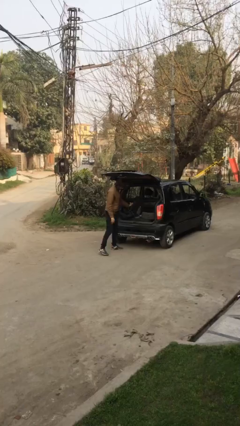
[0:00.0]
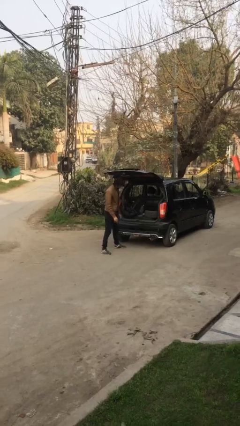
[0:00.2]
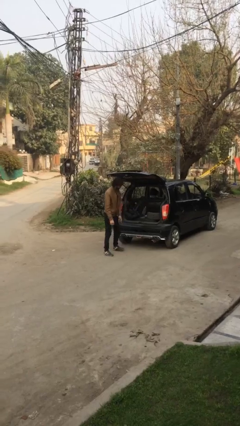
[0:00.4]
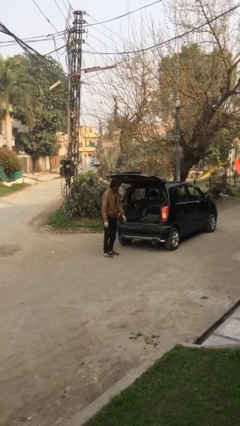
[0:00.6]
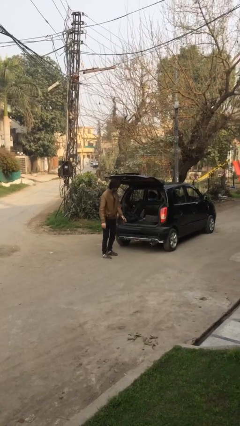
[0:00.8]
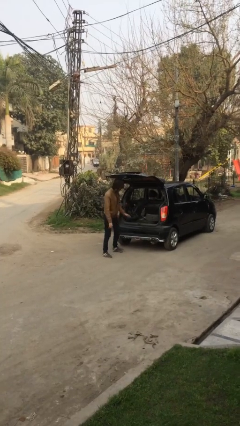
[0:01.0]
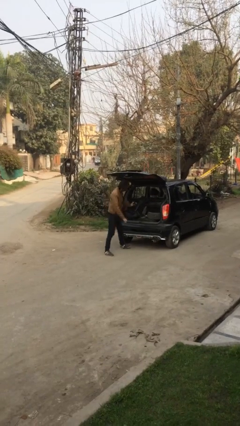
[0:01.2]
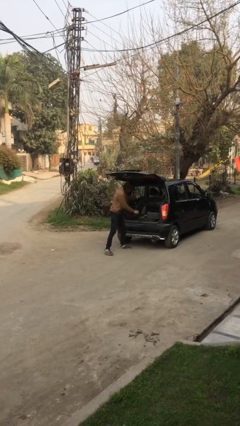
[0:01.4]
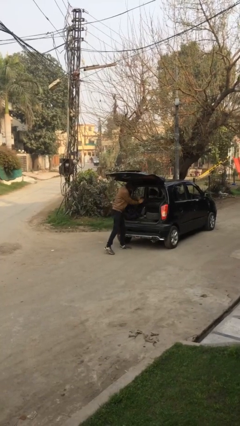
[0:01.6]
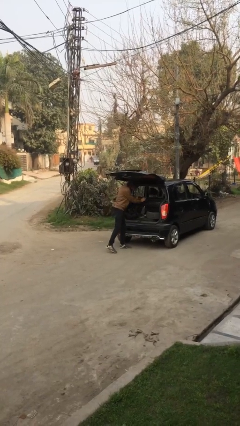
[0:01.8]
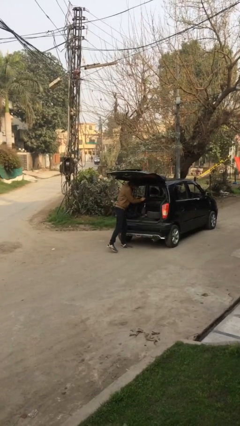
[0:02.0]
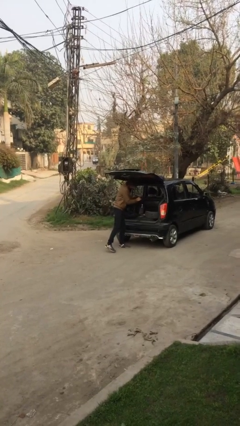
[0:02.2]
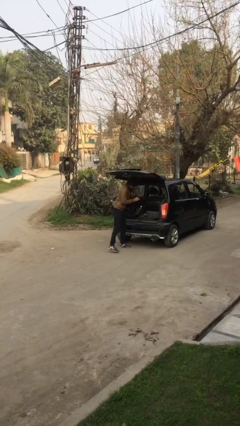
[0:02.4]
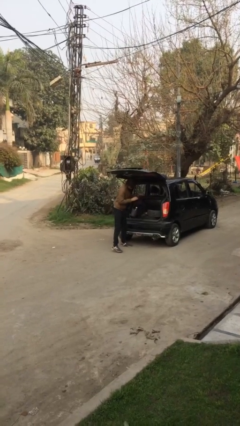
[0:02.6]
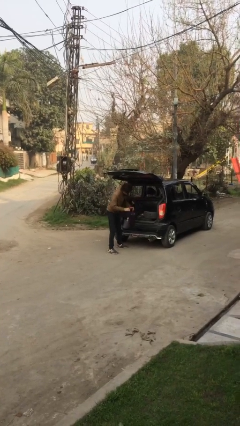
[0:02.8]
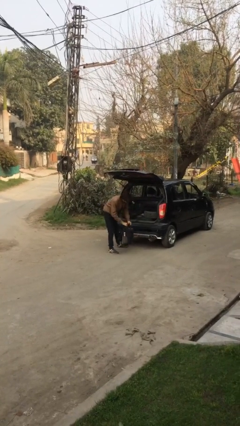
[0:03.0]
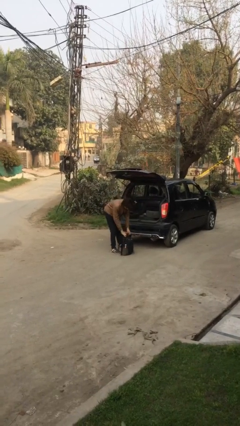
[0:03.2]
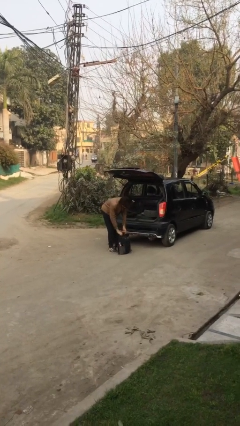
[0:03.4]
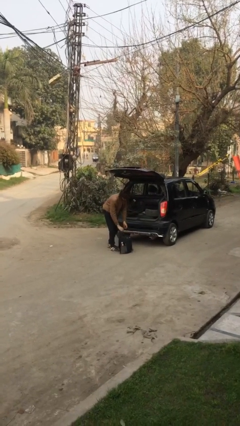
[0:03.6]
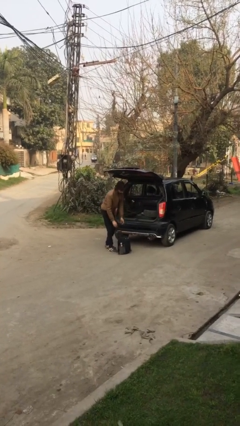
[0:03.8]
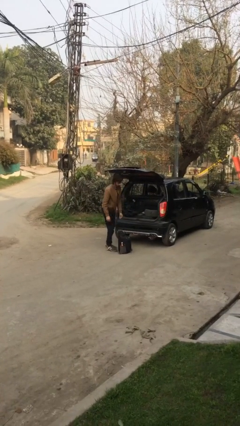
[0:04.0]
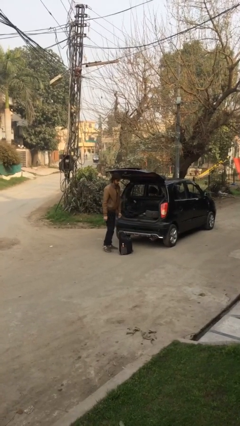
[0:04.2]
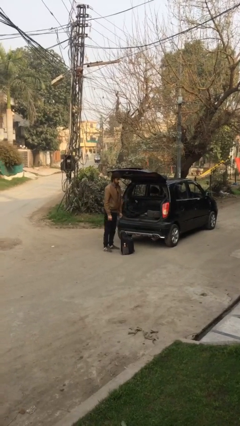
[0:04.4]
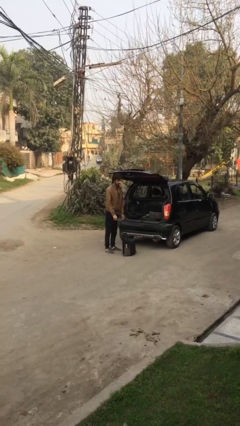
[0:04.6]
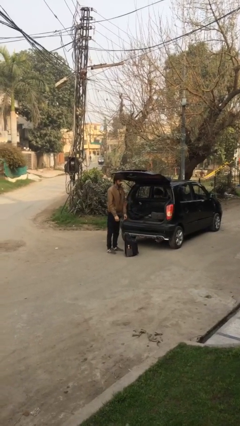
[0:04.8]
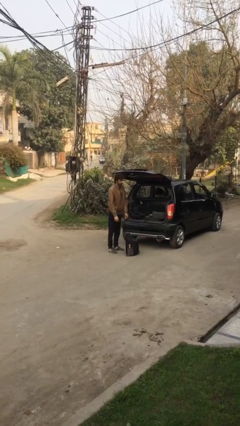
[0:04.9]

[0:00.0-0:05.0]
person unloads car

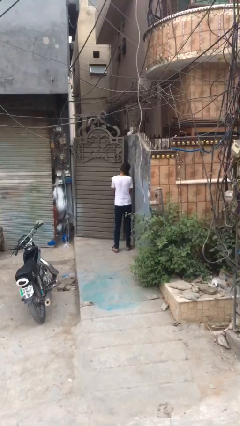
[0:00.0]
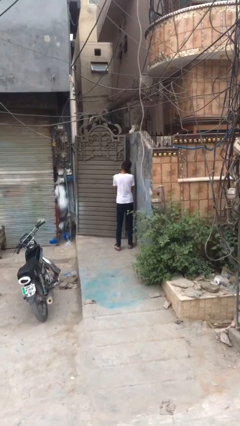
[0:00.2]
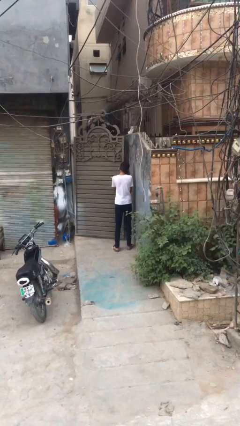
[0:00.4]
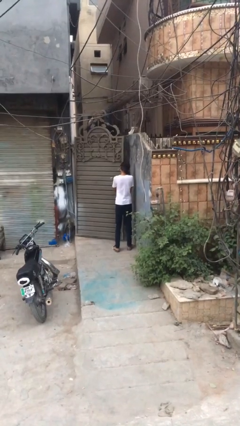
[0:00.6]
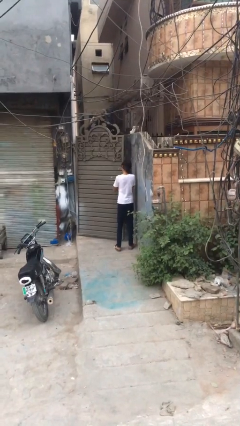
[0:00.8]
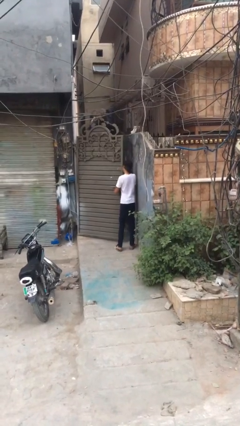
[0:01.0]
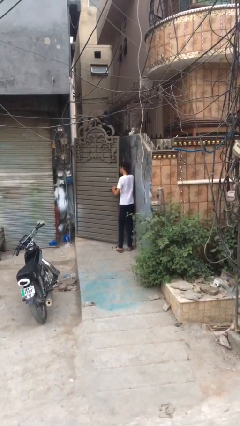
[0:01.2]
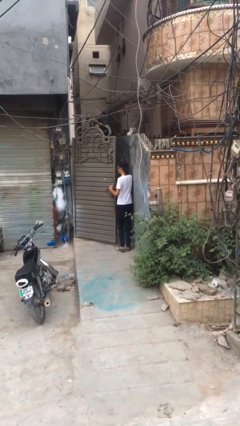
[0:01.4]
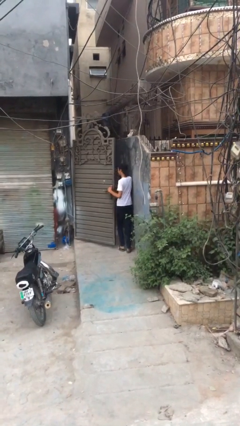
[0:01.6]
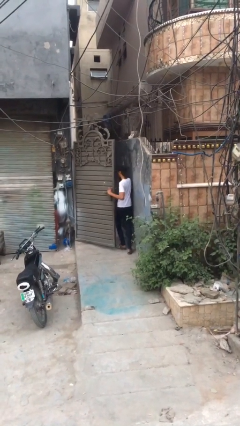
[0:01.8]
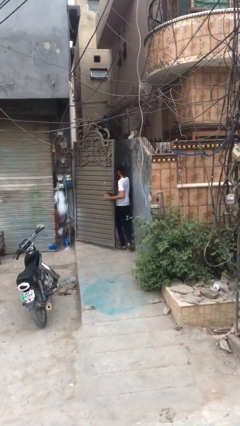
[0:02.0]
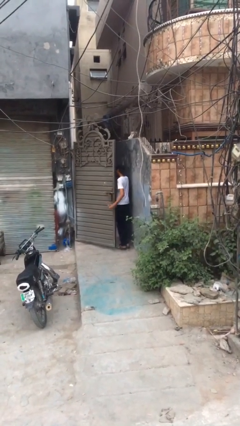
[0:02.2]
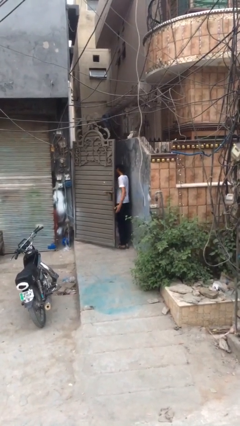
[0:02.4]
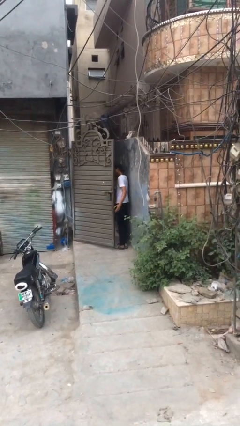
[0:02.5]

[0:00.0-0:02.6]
person opens facility door

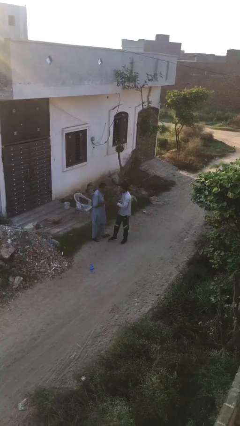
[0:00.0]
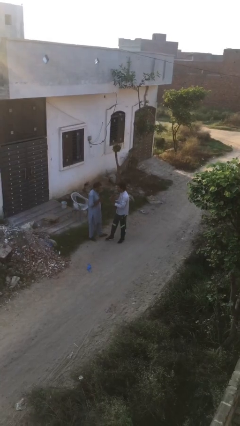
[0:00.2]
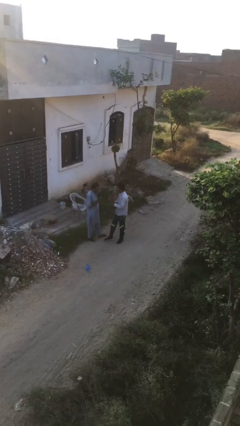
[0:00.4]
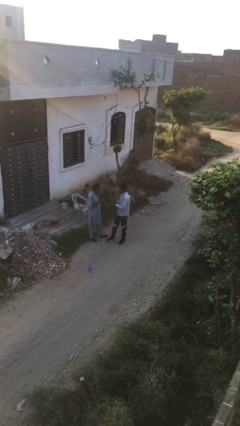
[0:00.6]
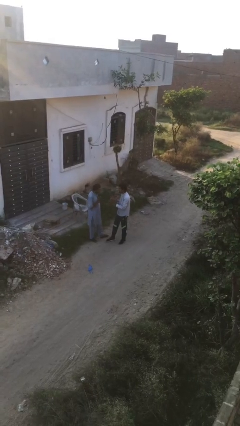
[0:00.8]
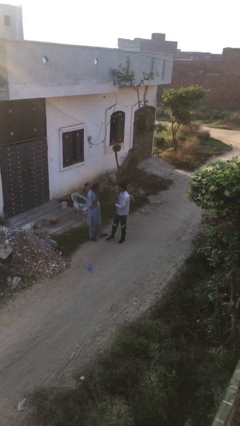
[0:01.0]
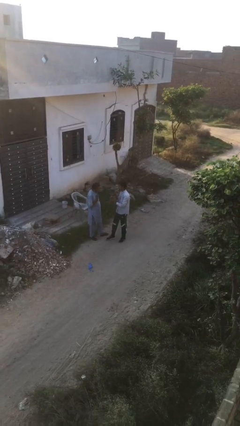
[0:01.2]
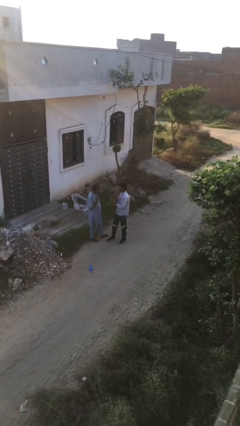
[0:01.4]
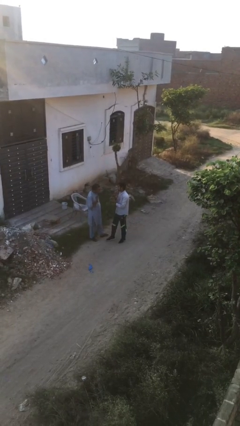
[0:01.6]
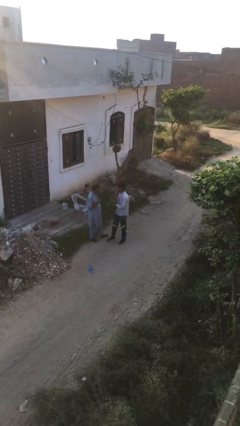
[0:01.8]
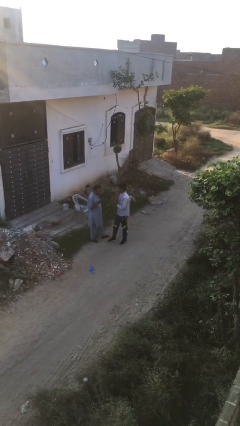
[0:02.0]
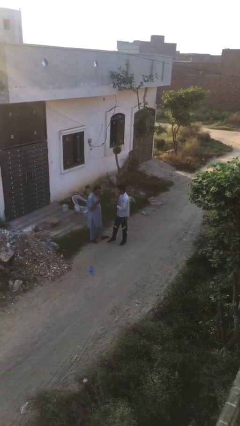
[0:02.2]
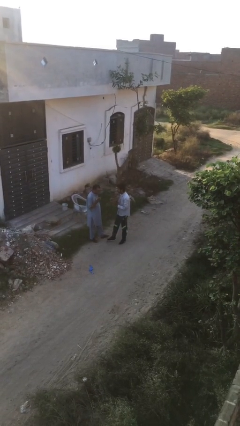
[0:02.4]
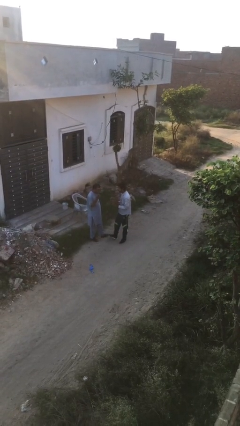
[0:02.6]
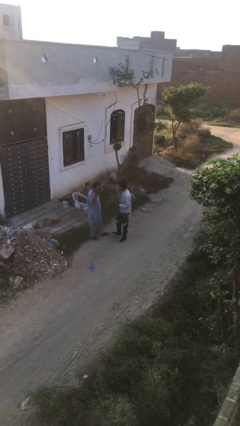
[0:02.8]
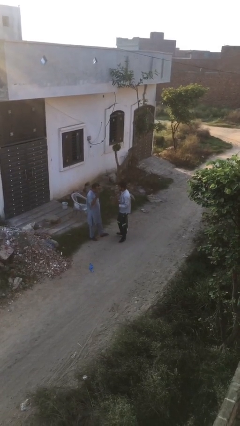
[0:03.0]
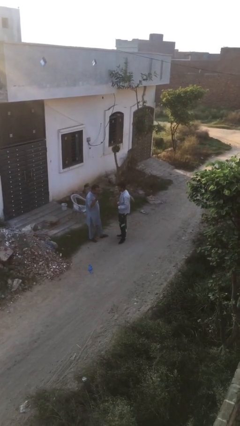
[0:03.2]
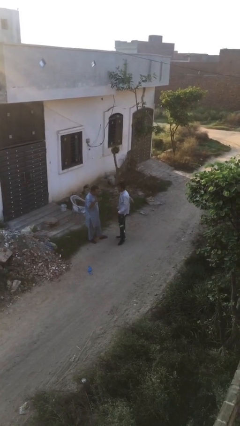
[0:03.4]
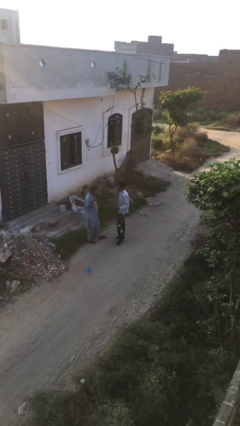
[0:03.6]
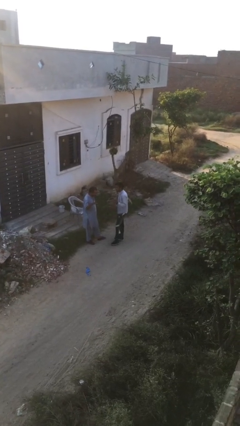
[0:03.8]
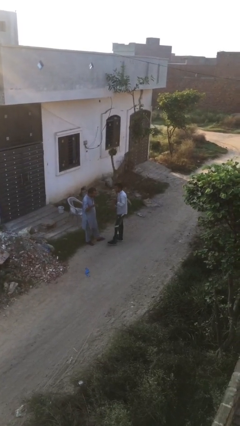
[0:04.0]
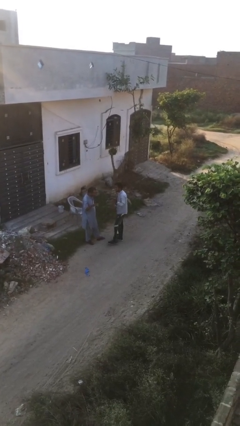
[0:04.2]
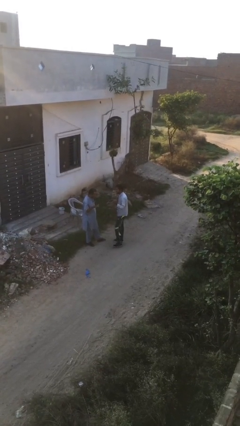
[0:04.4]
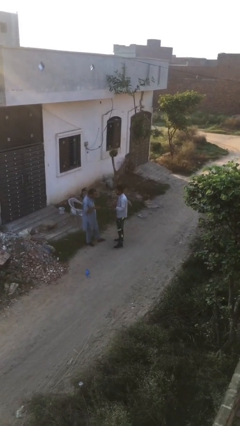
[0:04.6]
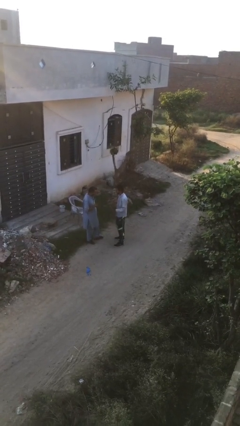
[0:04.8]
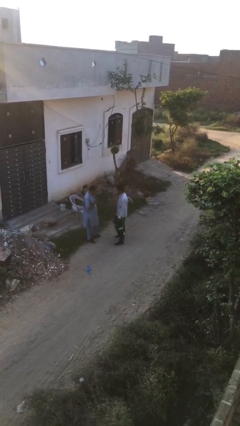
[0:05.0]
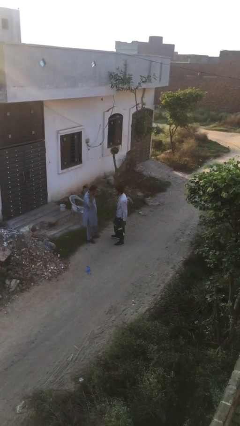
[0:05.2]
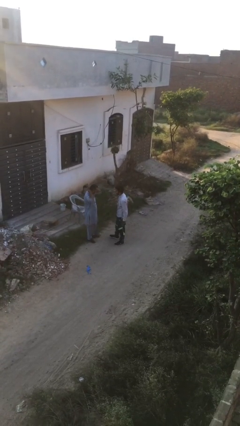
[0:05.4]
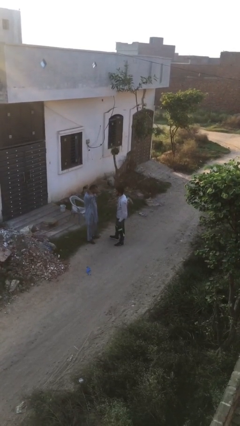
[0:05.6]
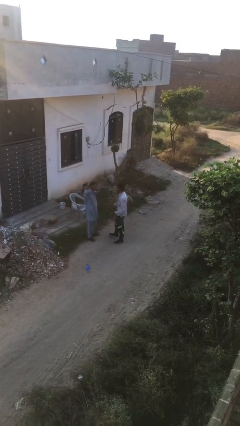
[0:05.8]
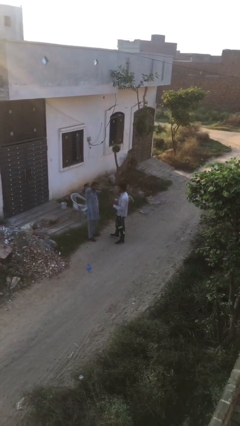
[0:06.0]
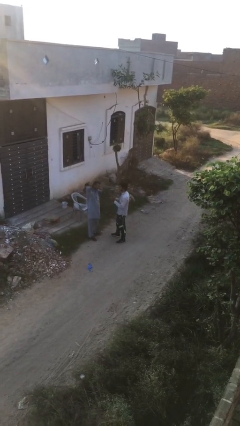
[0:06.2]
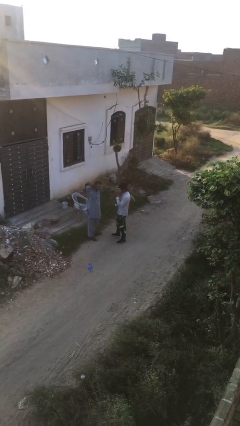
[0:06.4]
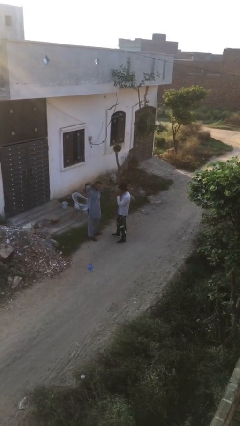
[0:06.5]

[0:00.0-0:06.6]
person talks to person

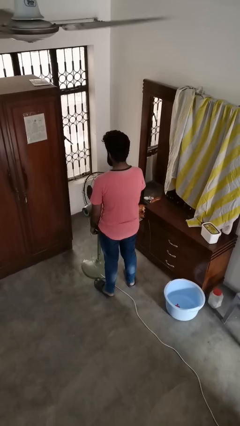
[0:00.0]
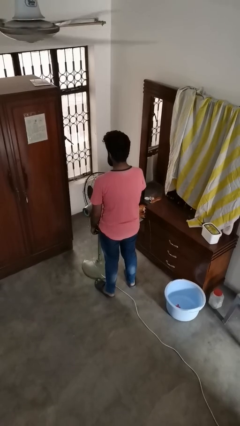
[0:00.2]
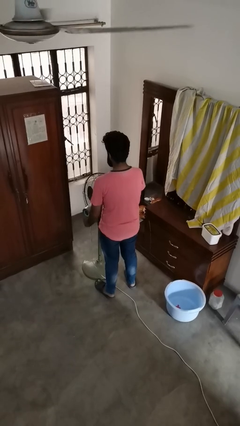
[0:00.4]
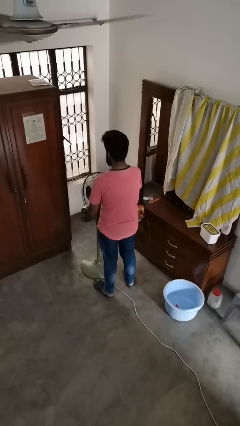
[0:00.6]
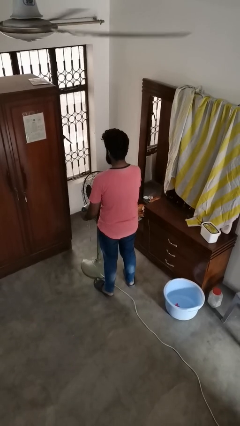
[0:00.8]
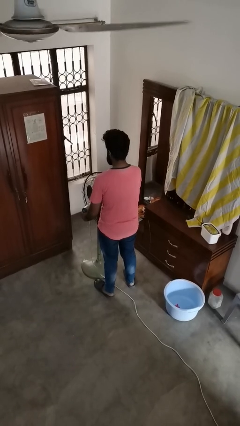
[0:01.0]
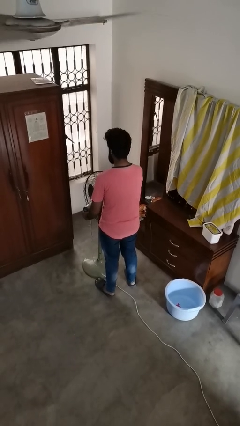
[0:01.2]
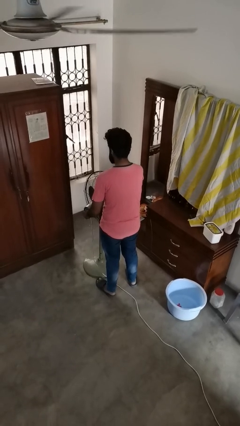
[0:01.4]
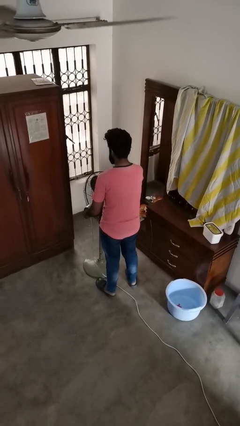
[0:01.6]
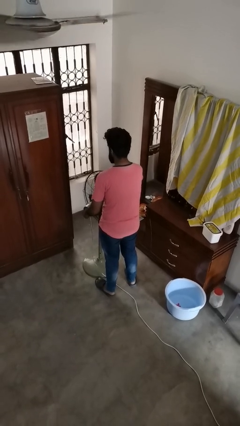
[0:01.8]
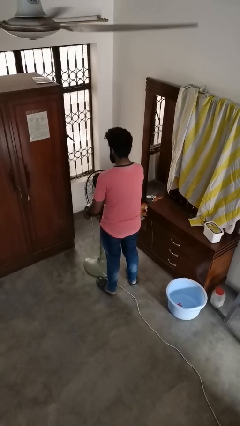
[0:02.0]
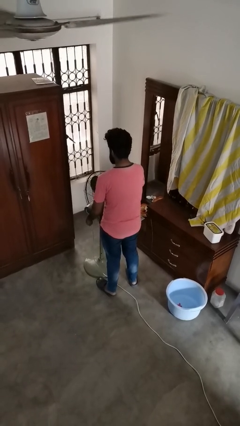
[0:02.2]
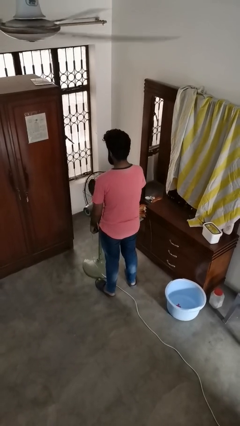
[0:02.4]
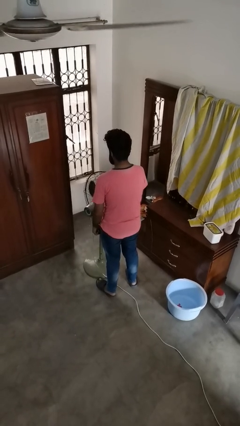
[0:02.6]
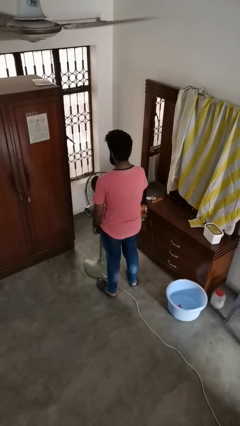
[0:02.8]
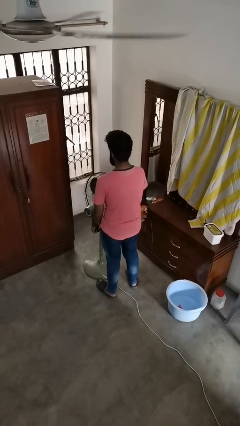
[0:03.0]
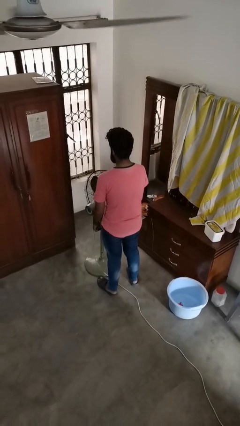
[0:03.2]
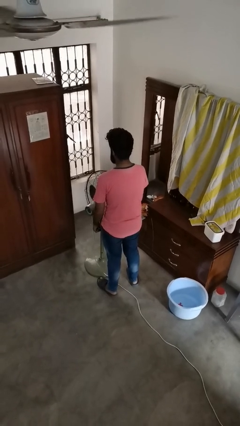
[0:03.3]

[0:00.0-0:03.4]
person turns on fan
